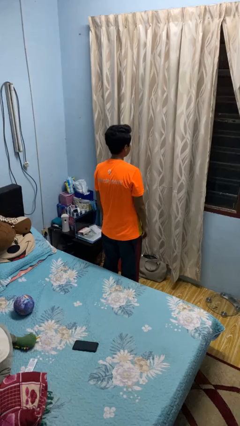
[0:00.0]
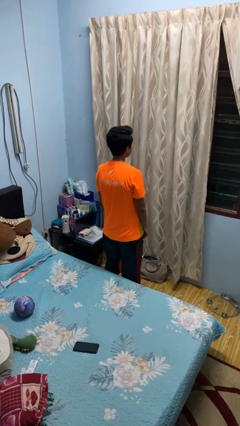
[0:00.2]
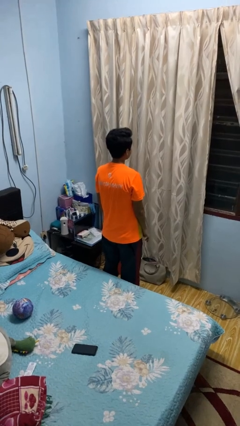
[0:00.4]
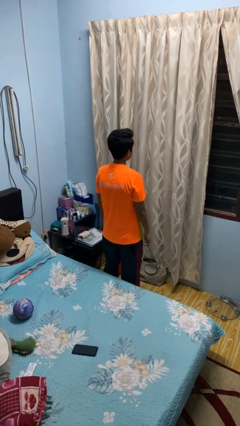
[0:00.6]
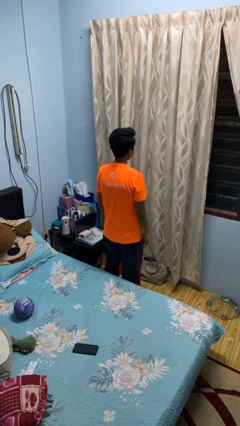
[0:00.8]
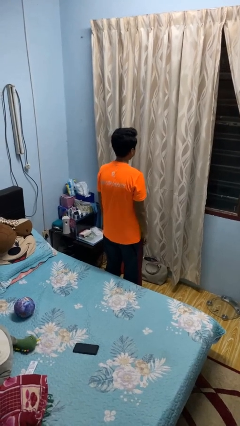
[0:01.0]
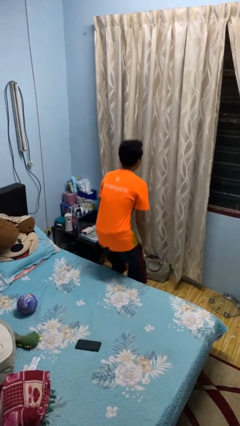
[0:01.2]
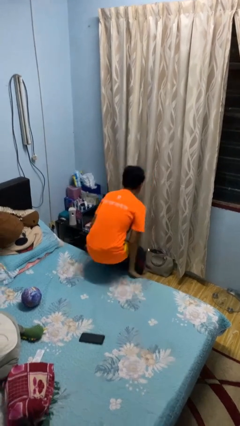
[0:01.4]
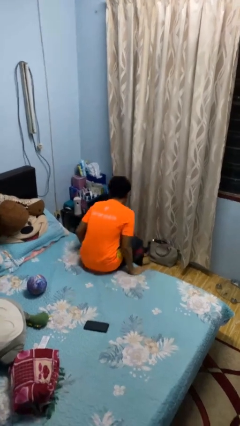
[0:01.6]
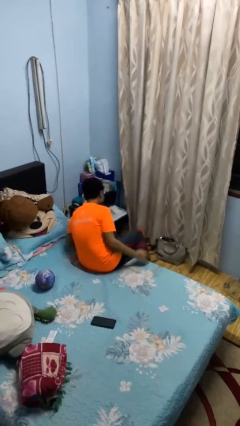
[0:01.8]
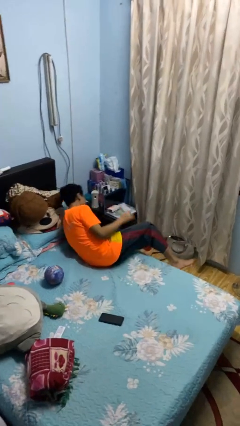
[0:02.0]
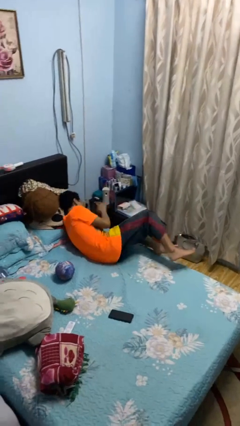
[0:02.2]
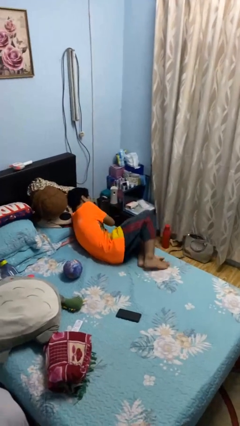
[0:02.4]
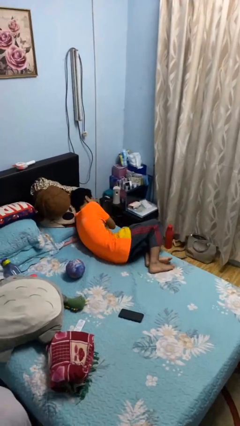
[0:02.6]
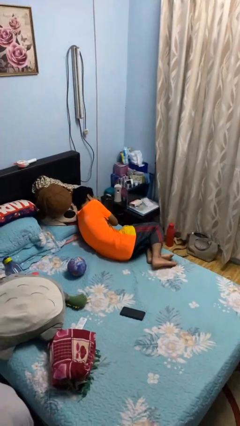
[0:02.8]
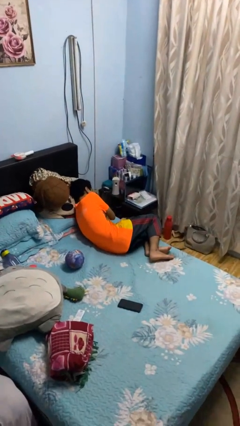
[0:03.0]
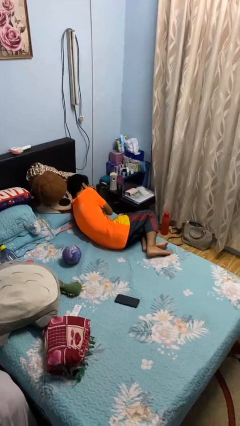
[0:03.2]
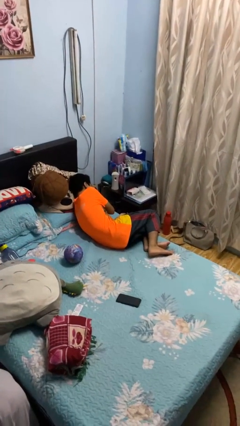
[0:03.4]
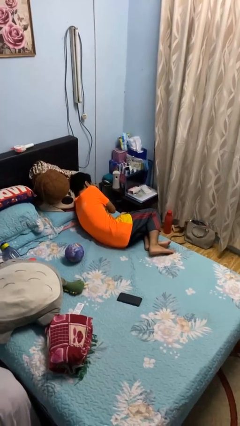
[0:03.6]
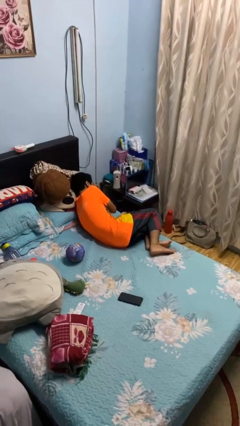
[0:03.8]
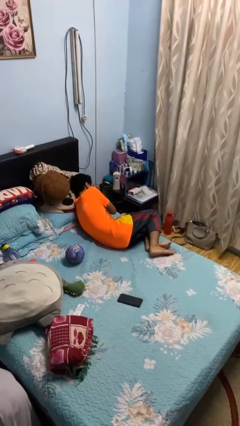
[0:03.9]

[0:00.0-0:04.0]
person lies down on bed

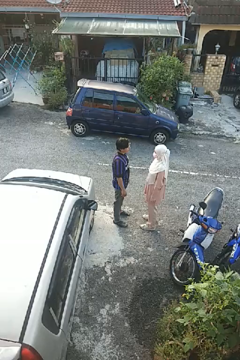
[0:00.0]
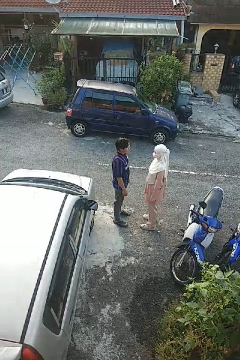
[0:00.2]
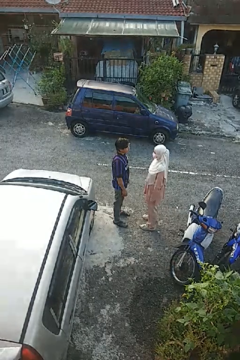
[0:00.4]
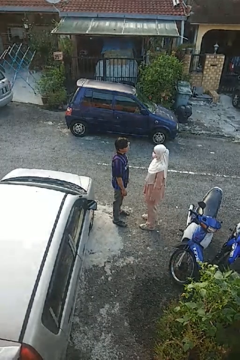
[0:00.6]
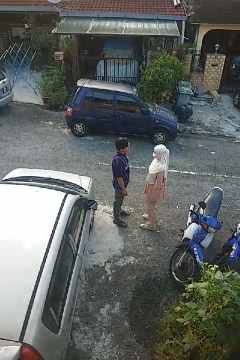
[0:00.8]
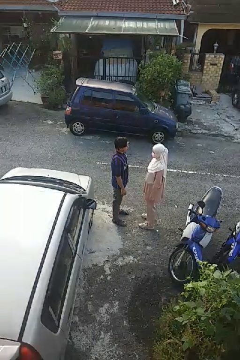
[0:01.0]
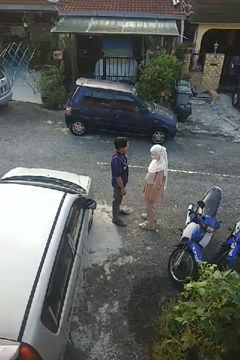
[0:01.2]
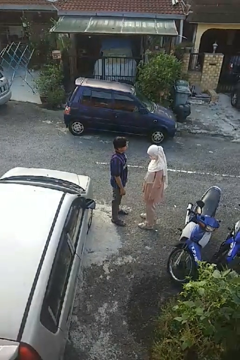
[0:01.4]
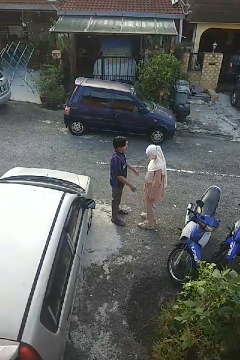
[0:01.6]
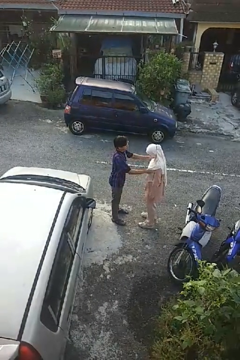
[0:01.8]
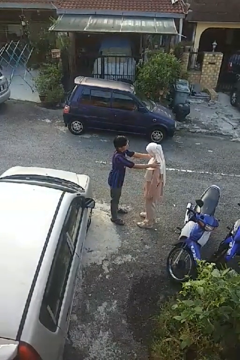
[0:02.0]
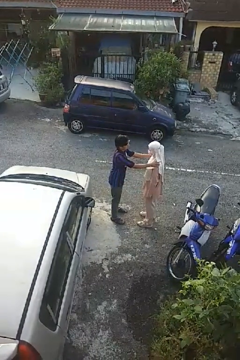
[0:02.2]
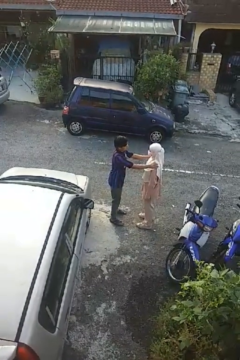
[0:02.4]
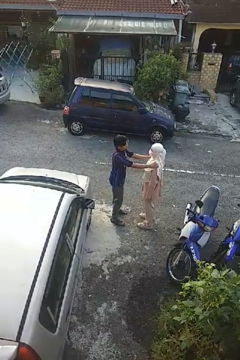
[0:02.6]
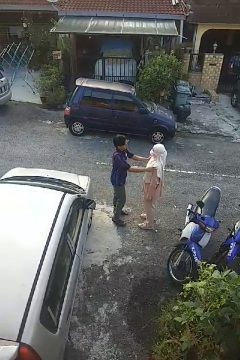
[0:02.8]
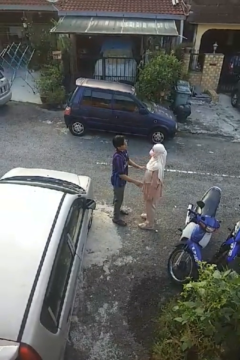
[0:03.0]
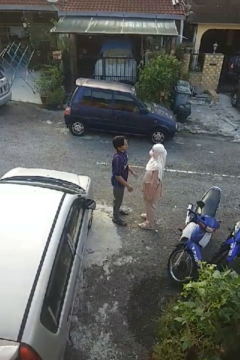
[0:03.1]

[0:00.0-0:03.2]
person pounds shoulders of person

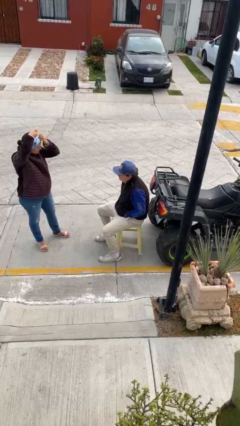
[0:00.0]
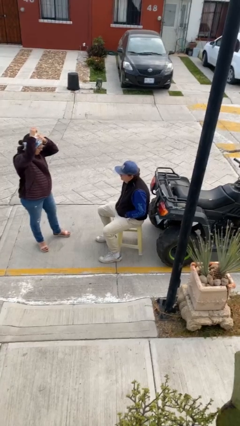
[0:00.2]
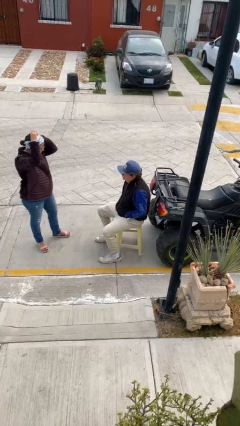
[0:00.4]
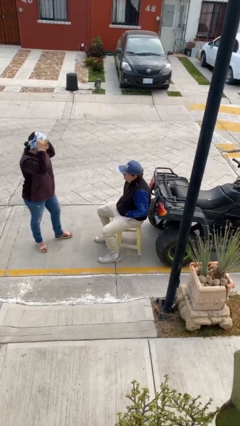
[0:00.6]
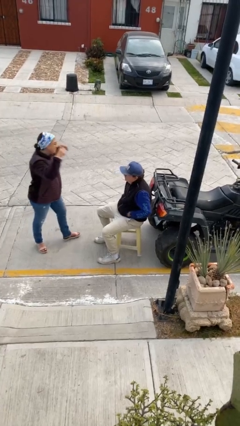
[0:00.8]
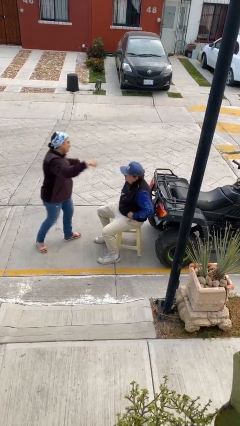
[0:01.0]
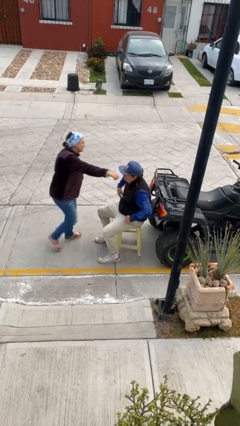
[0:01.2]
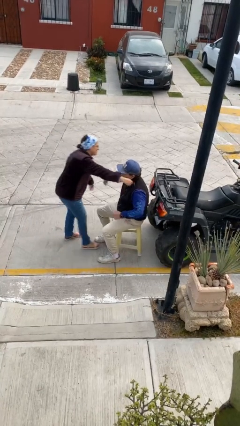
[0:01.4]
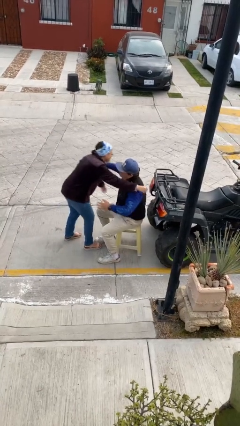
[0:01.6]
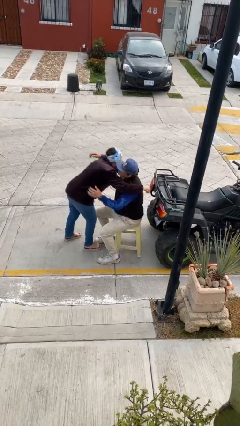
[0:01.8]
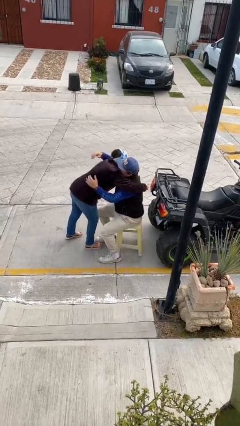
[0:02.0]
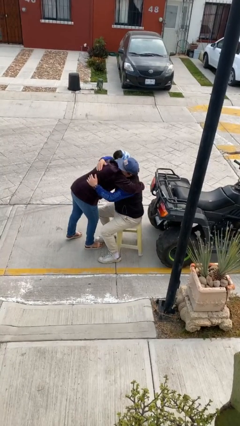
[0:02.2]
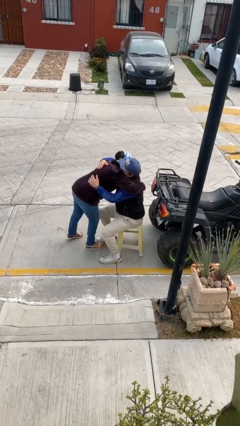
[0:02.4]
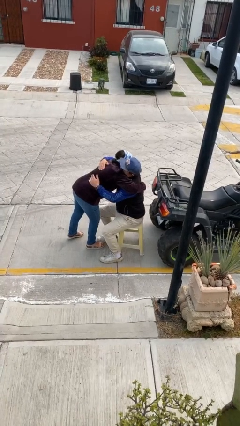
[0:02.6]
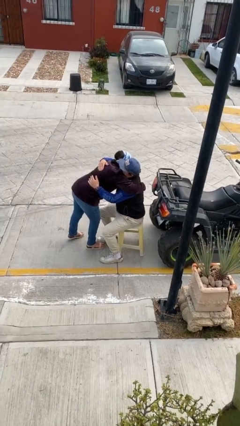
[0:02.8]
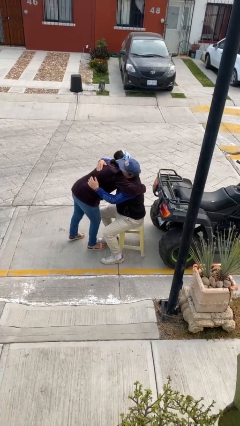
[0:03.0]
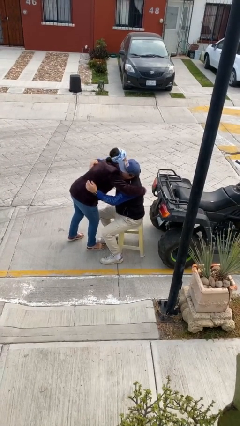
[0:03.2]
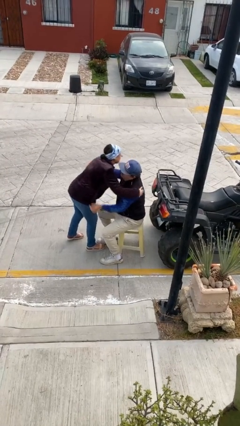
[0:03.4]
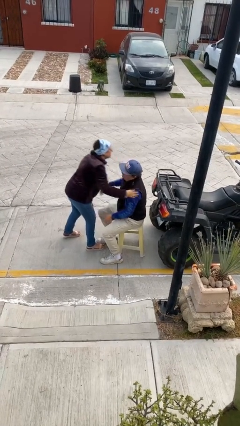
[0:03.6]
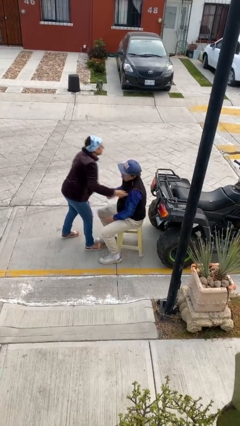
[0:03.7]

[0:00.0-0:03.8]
person embraces person

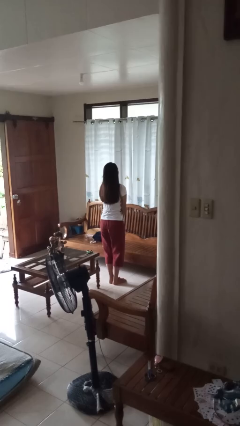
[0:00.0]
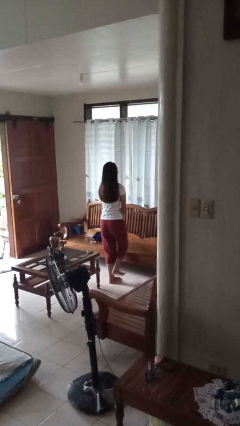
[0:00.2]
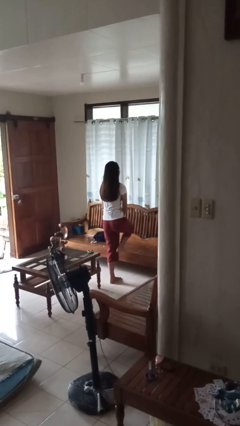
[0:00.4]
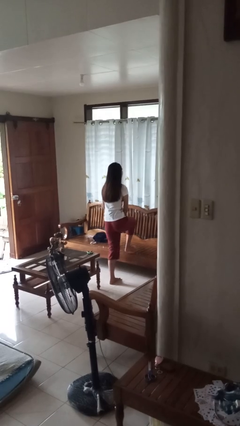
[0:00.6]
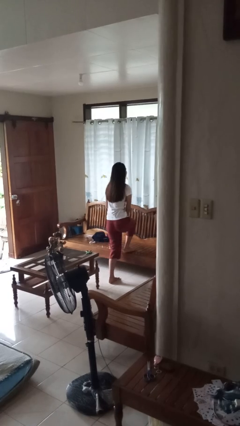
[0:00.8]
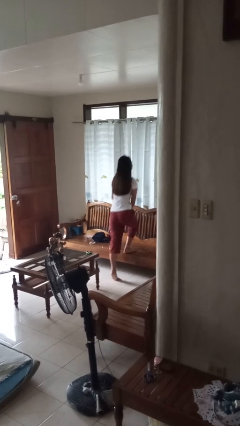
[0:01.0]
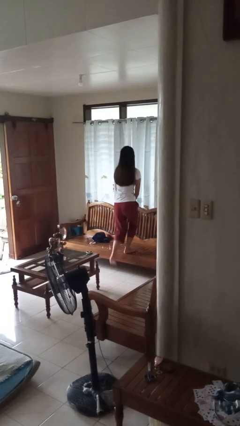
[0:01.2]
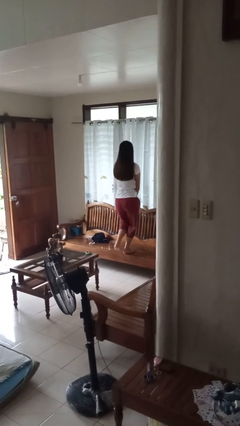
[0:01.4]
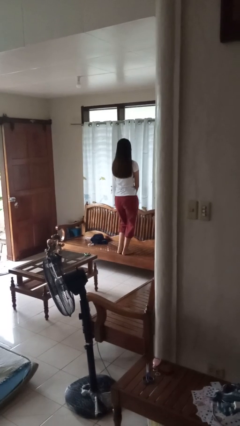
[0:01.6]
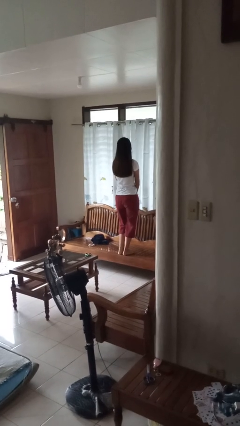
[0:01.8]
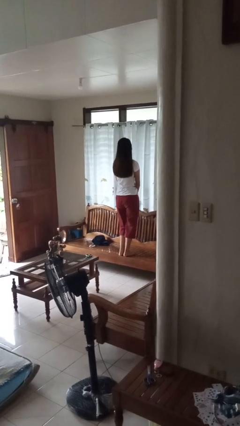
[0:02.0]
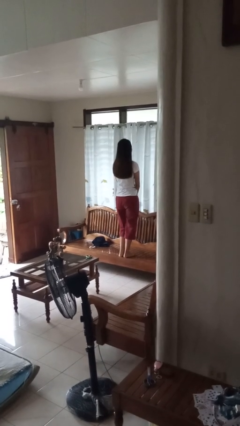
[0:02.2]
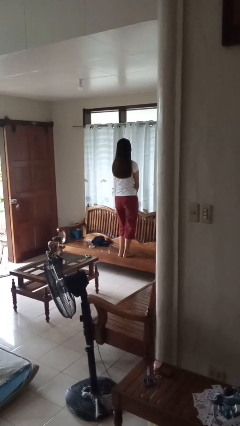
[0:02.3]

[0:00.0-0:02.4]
person climbs on chair

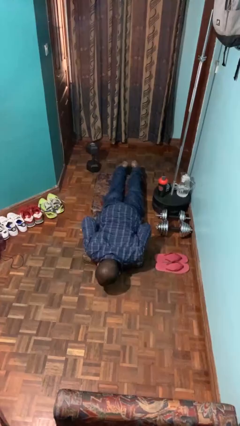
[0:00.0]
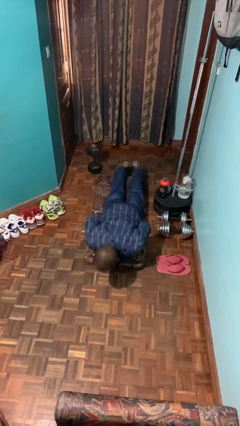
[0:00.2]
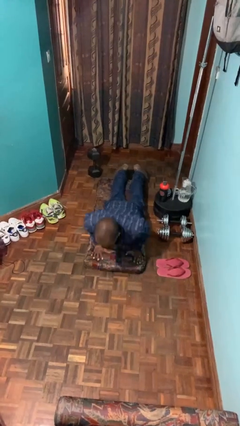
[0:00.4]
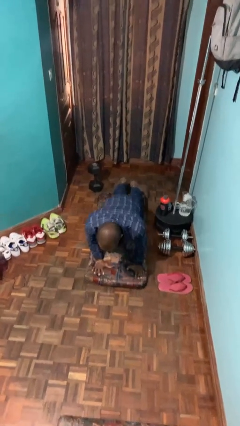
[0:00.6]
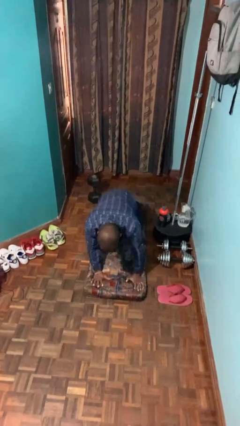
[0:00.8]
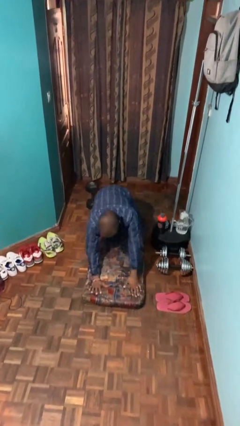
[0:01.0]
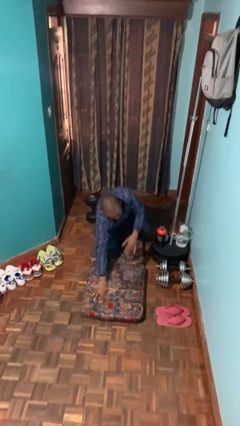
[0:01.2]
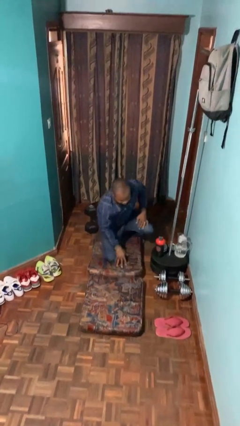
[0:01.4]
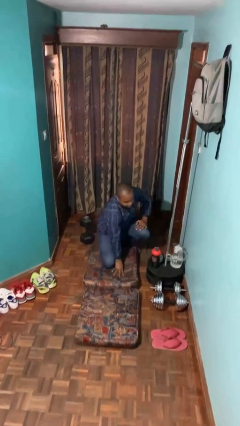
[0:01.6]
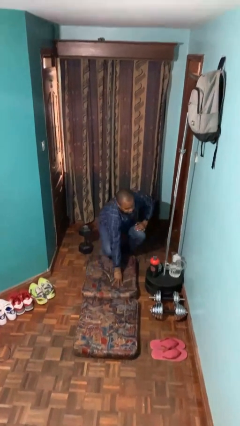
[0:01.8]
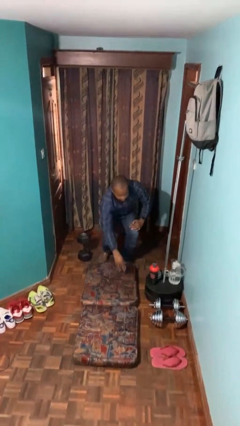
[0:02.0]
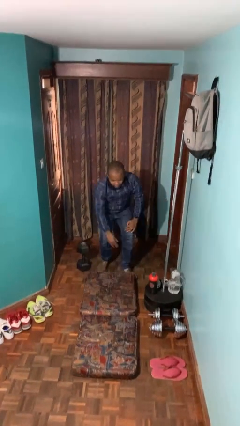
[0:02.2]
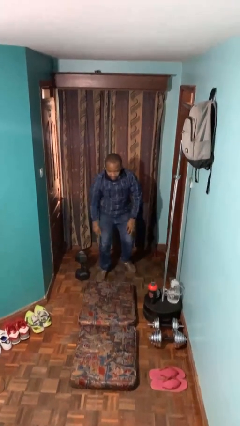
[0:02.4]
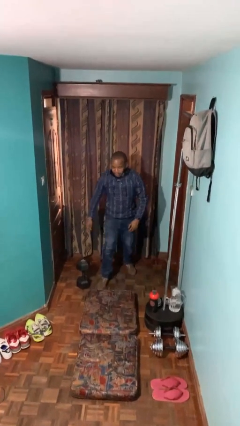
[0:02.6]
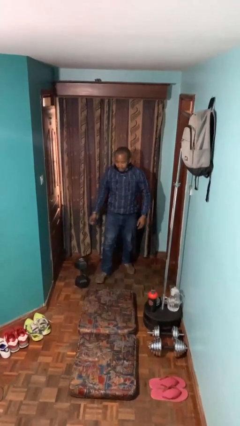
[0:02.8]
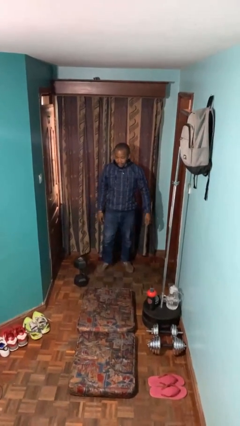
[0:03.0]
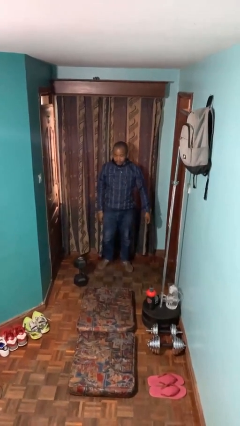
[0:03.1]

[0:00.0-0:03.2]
person stands up from floor

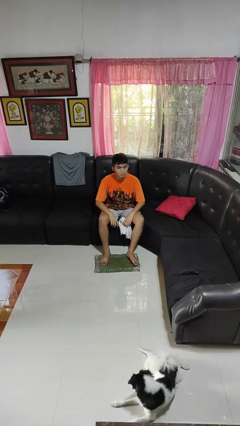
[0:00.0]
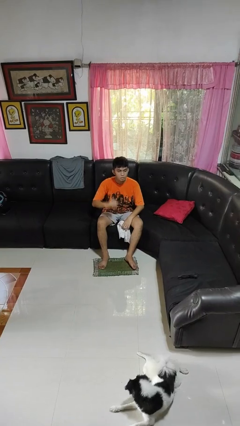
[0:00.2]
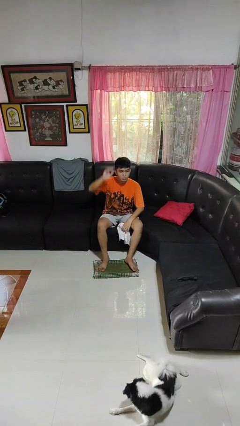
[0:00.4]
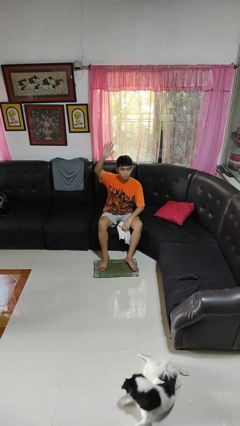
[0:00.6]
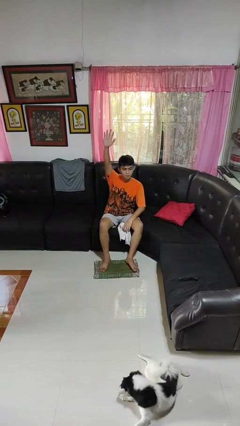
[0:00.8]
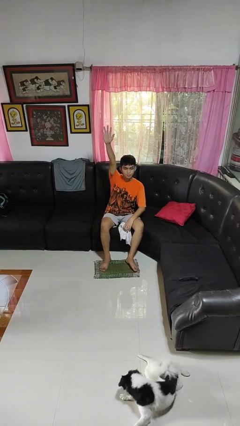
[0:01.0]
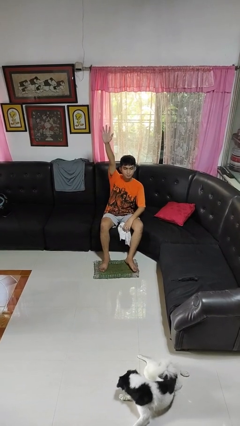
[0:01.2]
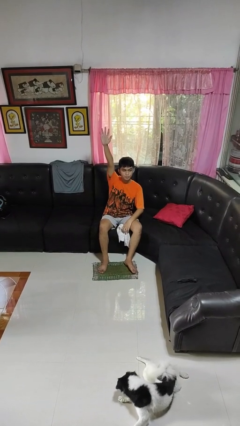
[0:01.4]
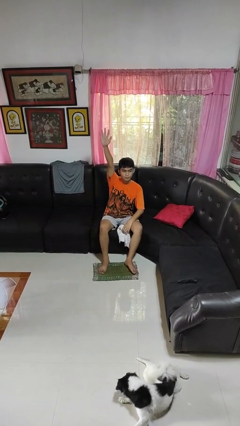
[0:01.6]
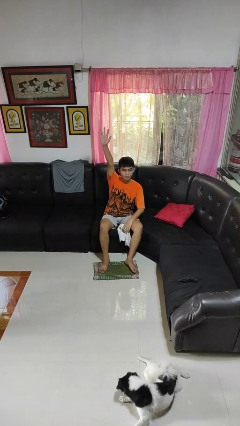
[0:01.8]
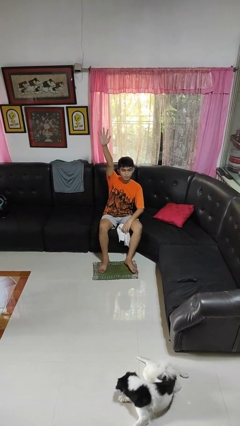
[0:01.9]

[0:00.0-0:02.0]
person gestures raise hand
